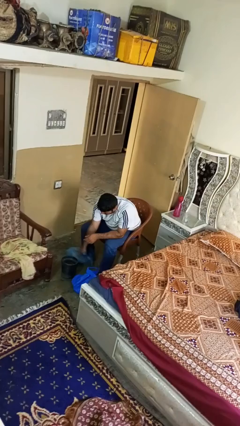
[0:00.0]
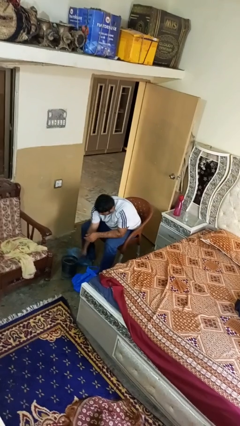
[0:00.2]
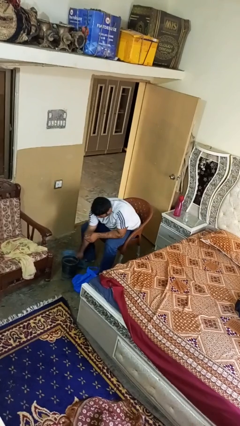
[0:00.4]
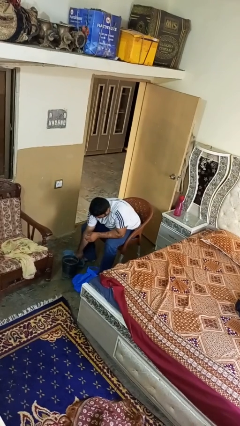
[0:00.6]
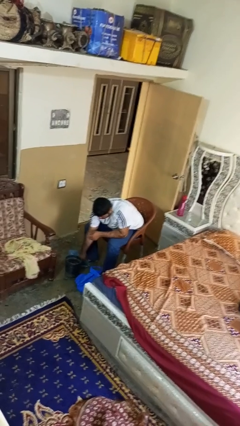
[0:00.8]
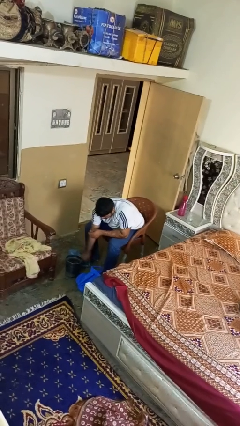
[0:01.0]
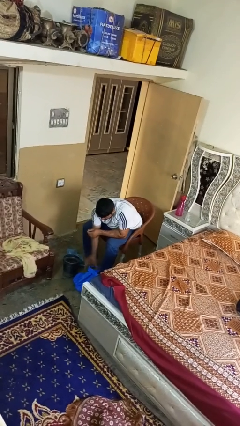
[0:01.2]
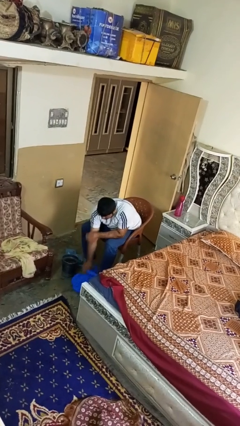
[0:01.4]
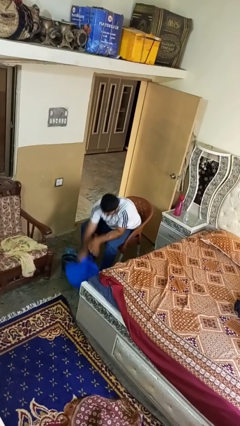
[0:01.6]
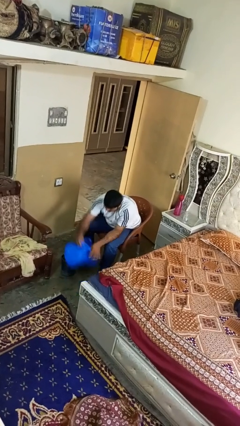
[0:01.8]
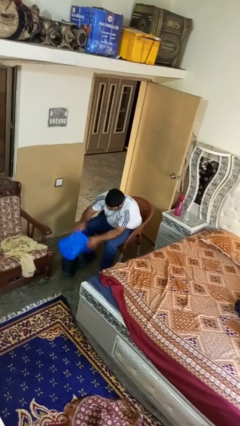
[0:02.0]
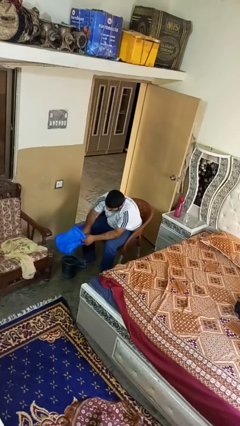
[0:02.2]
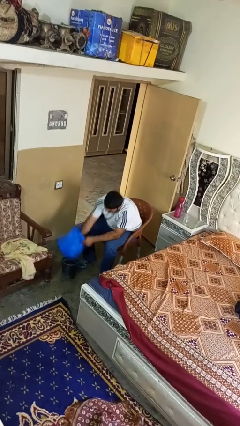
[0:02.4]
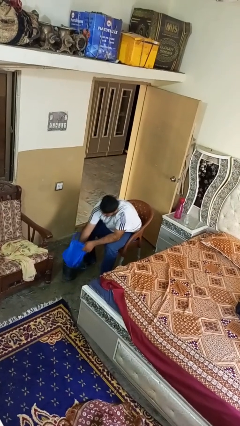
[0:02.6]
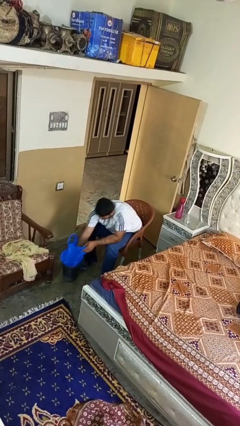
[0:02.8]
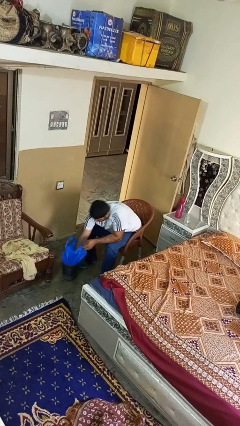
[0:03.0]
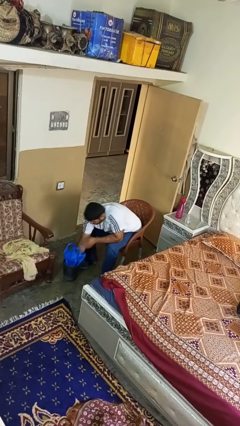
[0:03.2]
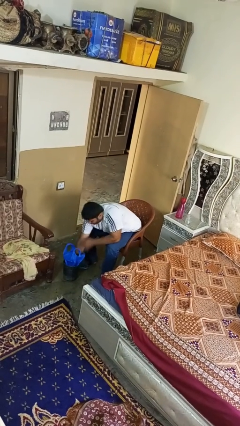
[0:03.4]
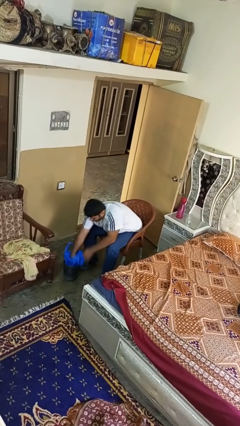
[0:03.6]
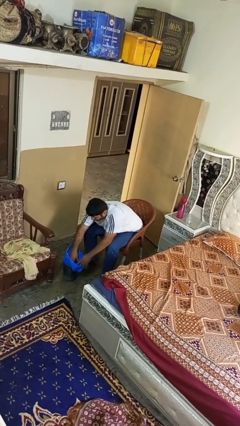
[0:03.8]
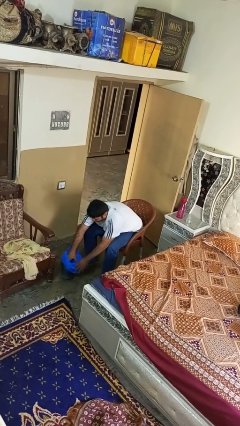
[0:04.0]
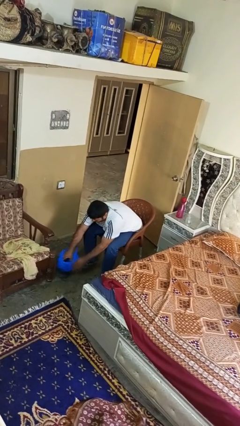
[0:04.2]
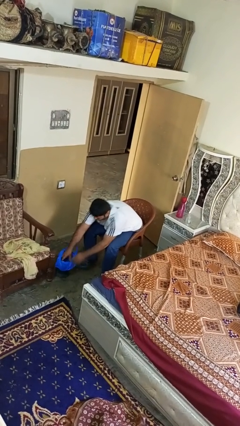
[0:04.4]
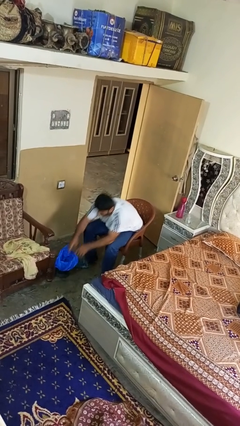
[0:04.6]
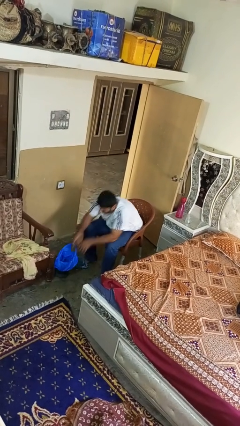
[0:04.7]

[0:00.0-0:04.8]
person inserts trashbag into trashcan

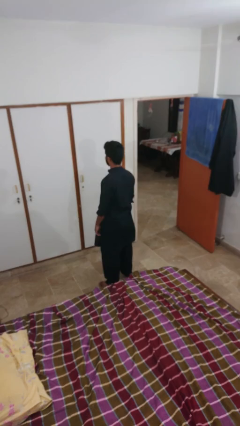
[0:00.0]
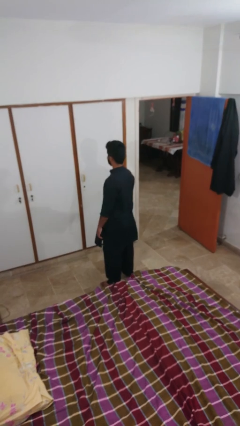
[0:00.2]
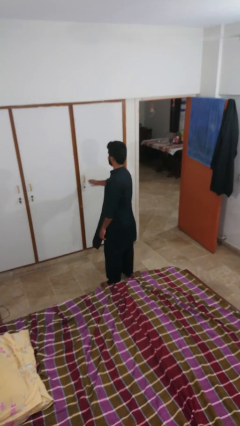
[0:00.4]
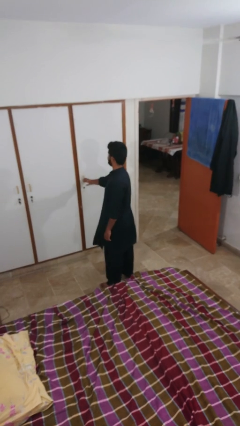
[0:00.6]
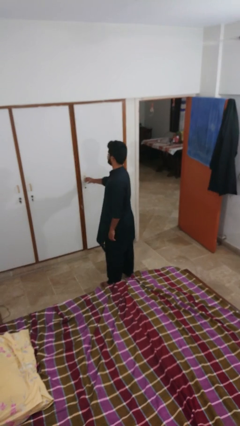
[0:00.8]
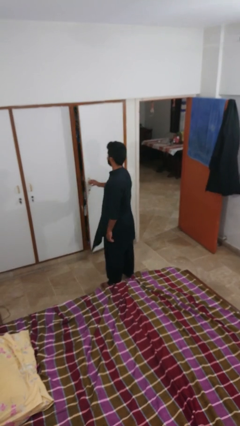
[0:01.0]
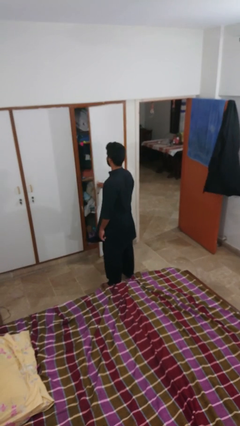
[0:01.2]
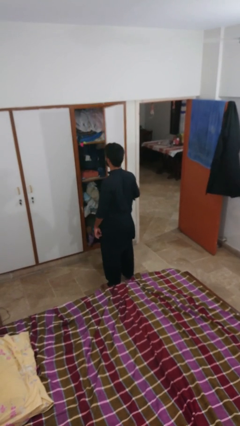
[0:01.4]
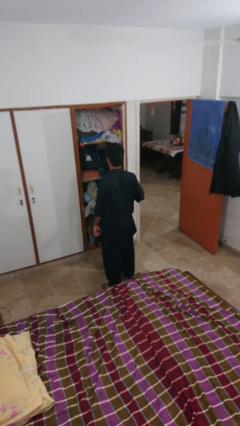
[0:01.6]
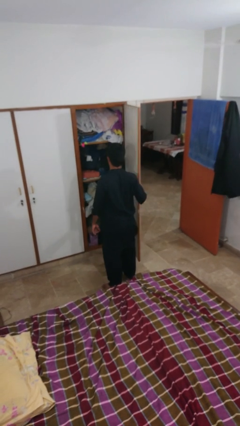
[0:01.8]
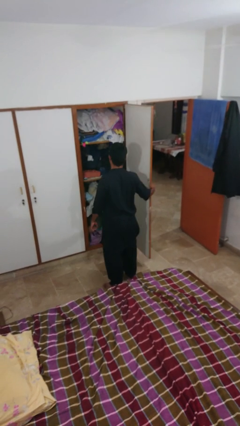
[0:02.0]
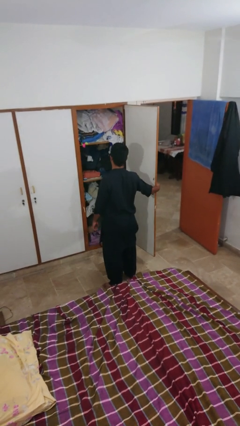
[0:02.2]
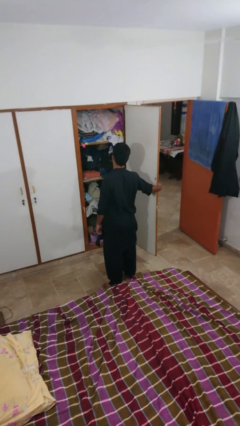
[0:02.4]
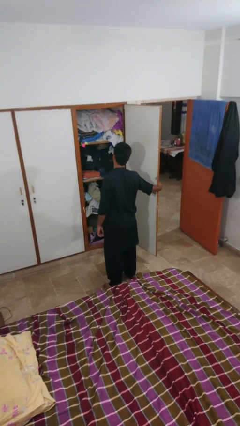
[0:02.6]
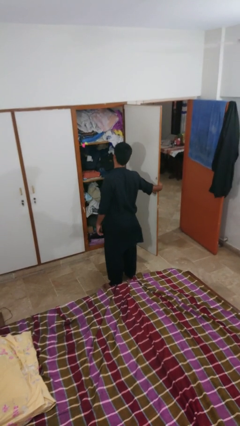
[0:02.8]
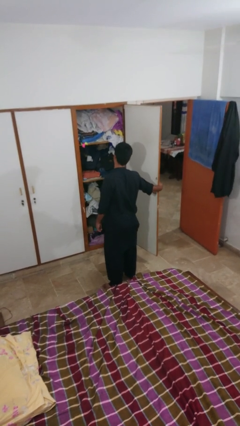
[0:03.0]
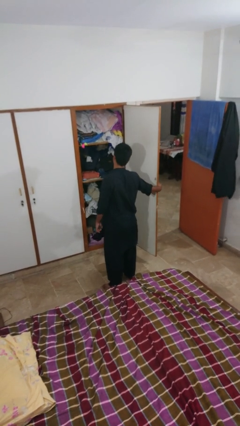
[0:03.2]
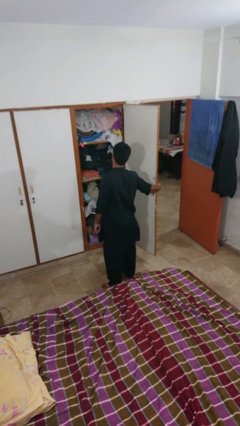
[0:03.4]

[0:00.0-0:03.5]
person opens closet door

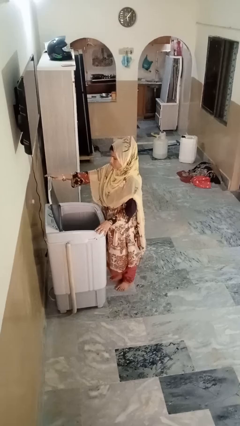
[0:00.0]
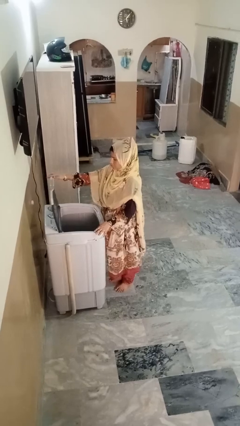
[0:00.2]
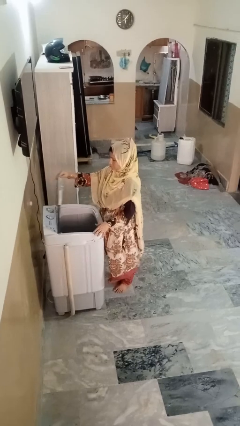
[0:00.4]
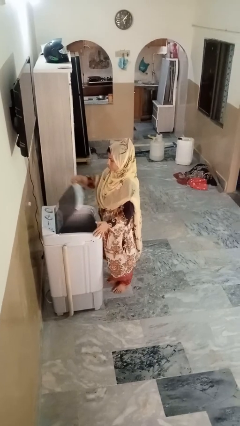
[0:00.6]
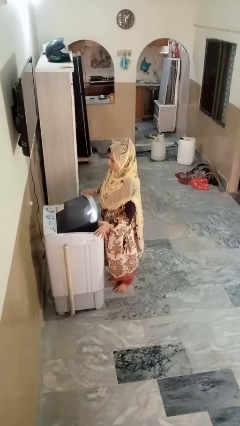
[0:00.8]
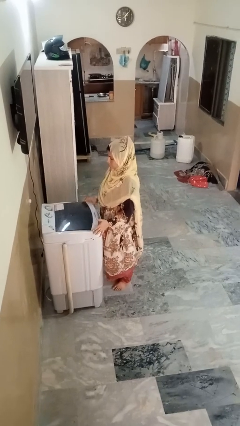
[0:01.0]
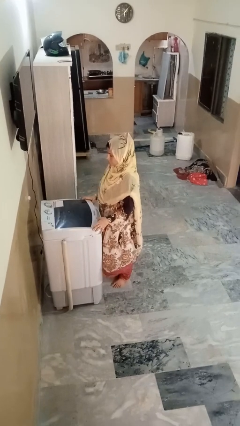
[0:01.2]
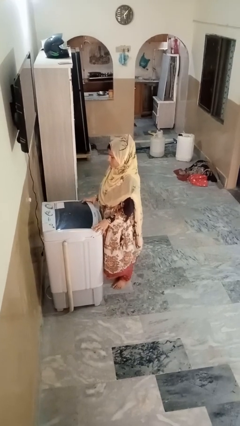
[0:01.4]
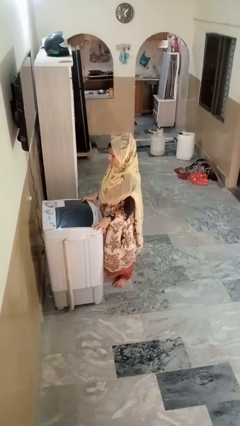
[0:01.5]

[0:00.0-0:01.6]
person closes clothes washer

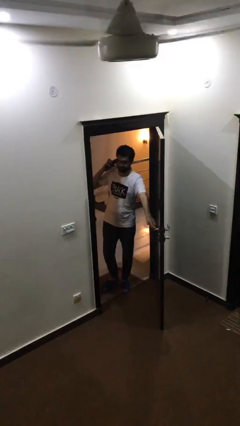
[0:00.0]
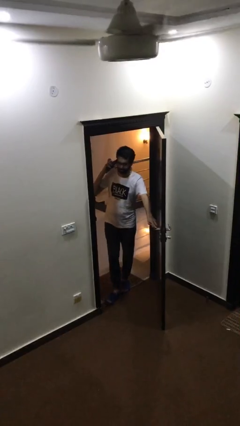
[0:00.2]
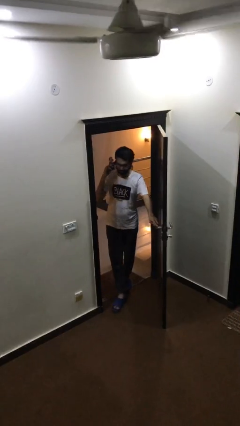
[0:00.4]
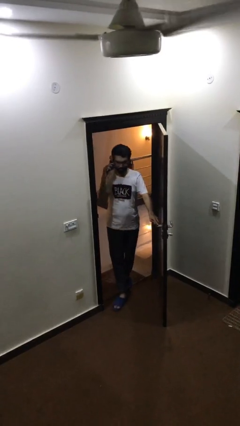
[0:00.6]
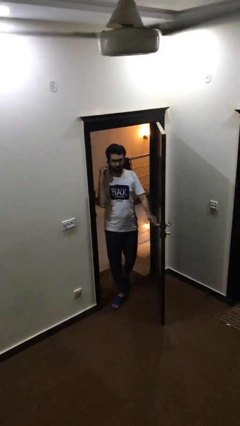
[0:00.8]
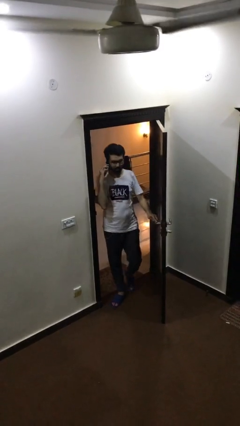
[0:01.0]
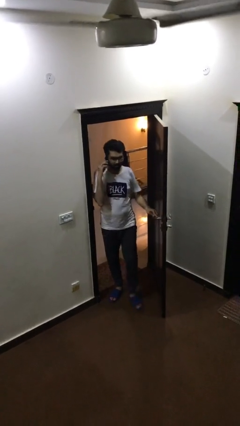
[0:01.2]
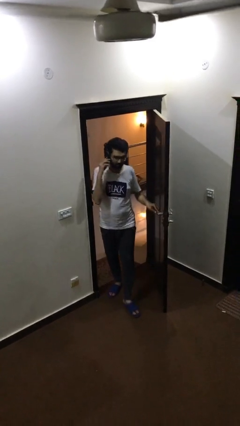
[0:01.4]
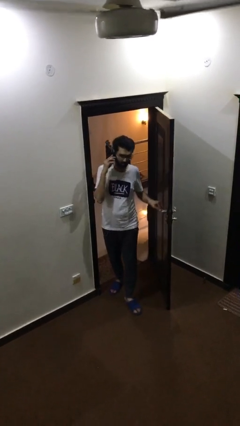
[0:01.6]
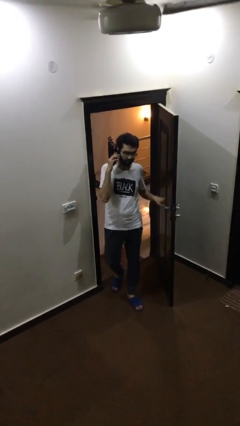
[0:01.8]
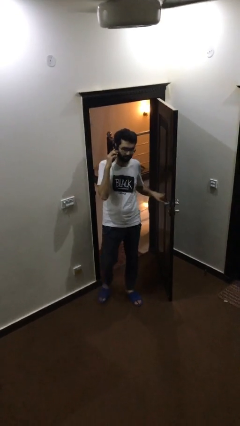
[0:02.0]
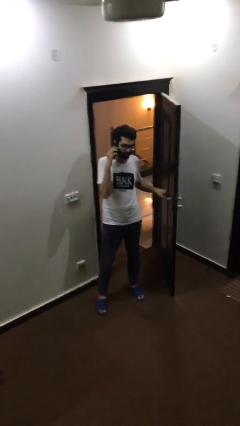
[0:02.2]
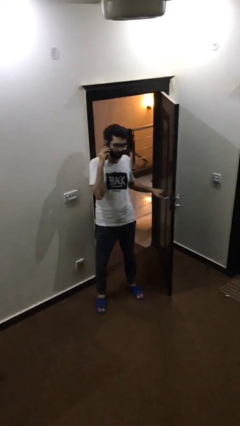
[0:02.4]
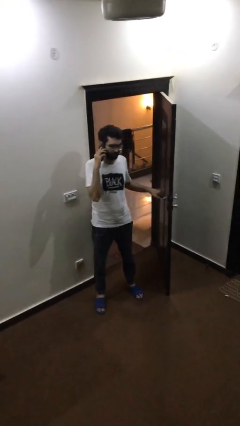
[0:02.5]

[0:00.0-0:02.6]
person enters scene through structure

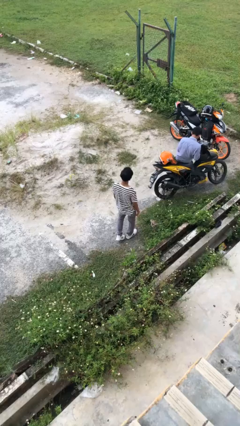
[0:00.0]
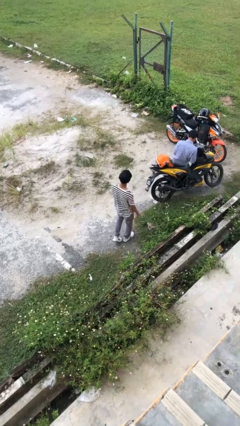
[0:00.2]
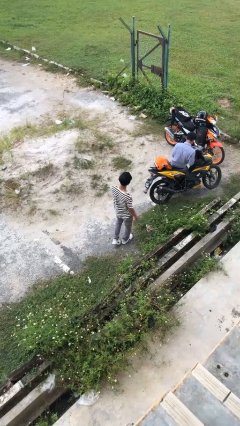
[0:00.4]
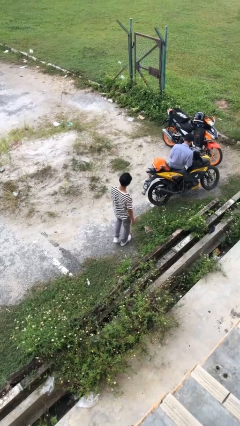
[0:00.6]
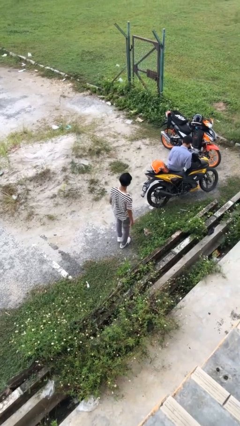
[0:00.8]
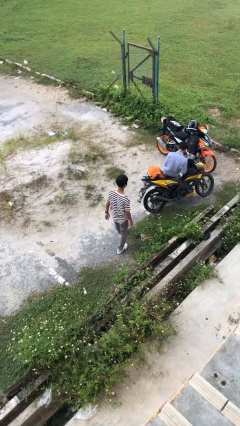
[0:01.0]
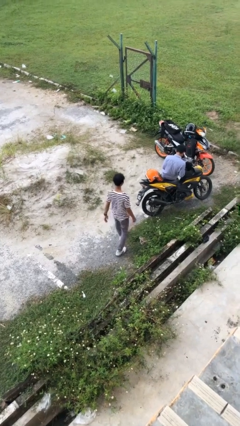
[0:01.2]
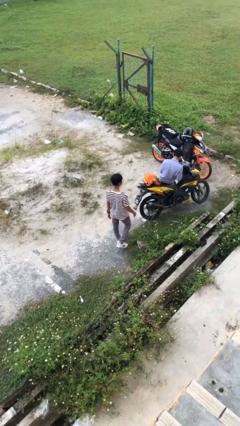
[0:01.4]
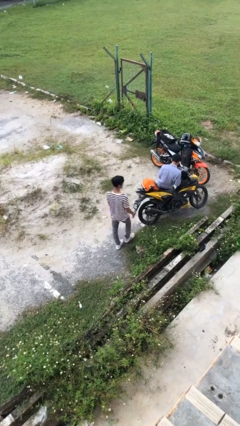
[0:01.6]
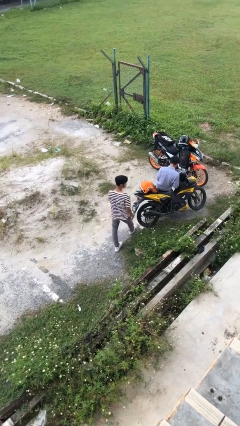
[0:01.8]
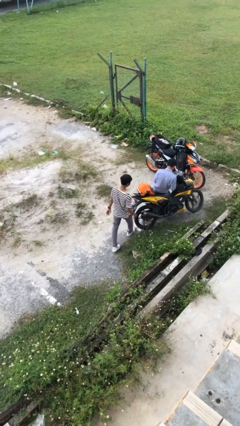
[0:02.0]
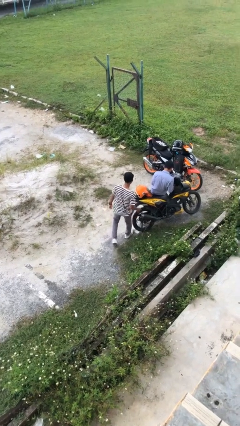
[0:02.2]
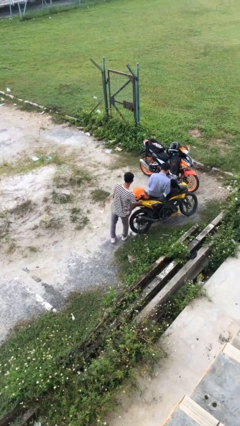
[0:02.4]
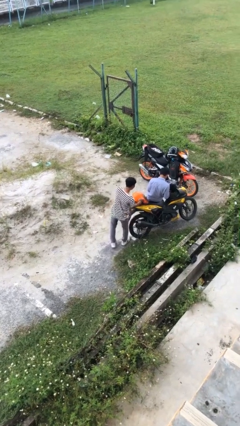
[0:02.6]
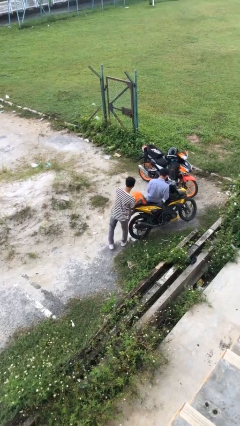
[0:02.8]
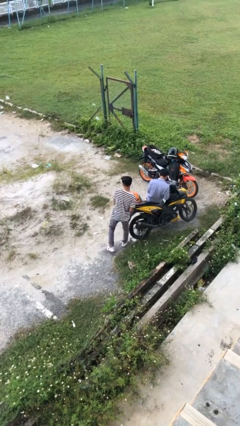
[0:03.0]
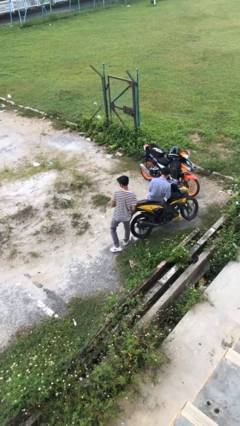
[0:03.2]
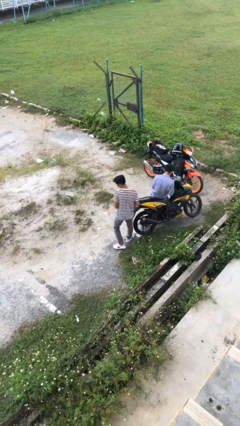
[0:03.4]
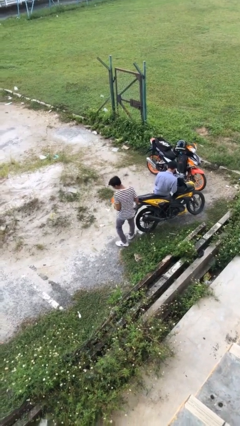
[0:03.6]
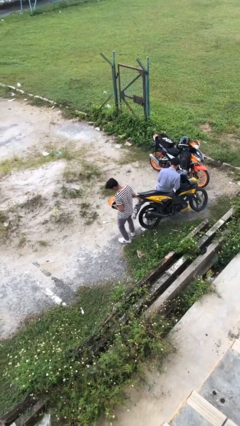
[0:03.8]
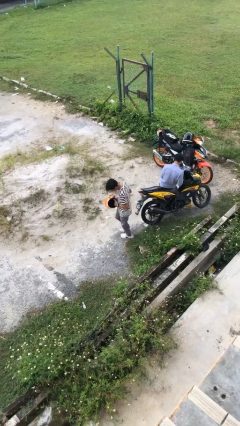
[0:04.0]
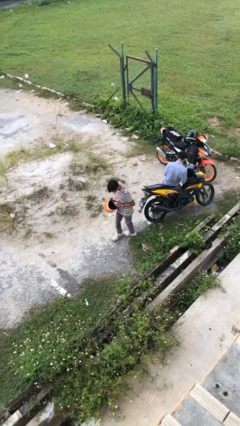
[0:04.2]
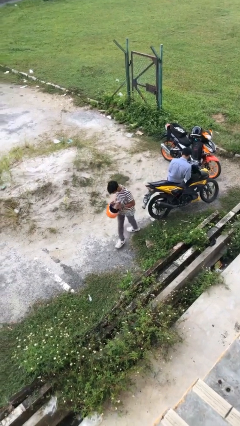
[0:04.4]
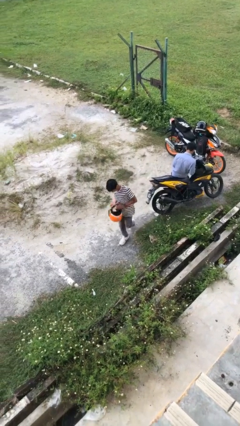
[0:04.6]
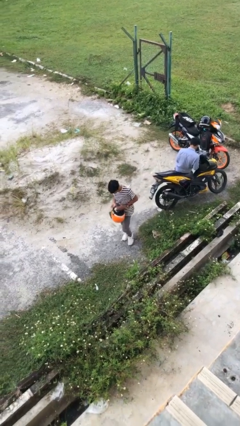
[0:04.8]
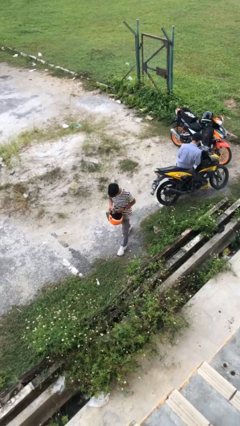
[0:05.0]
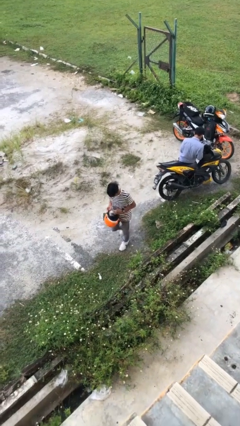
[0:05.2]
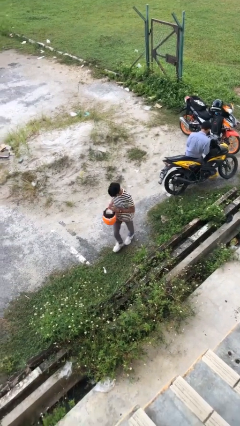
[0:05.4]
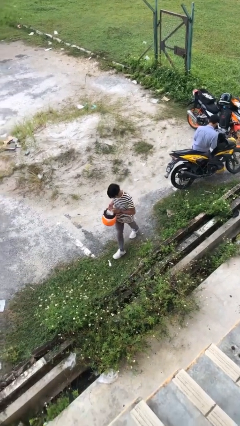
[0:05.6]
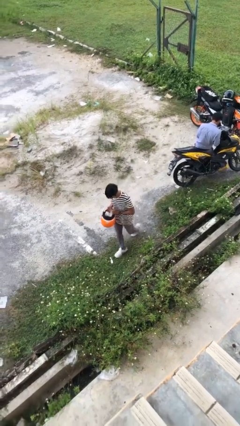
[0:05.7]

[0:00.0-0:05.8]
person steals object from person
